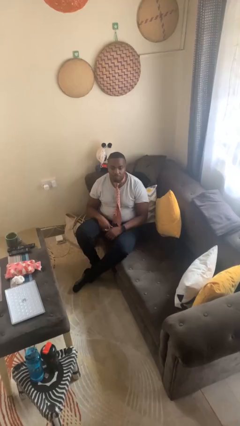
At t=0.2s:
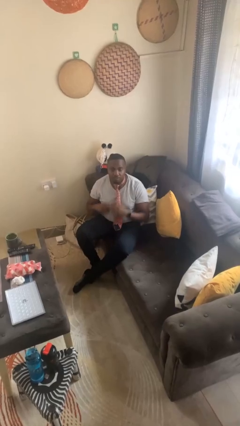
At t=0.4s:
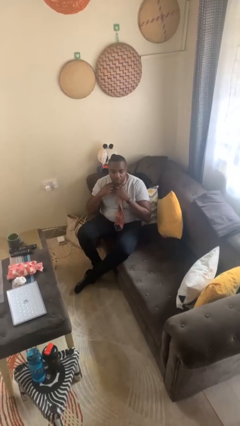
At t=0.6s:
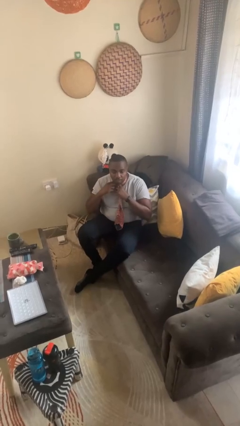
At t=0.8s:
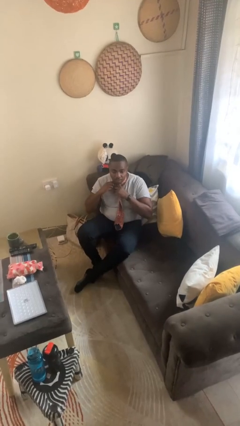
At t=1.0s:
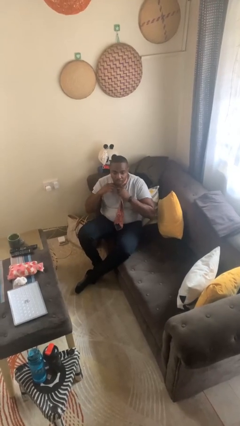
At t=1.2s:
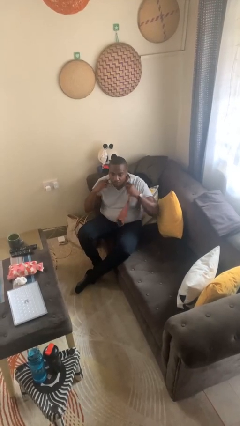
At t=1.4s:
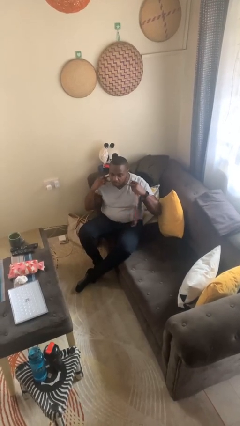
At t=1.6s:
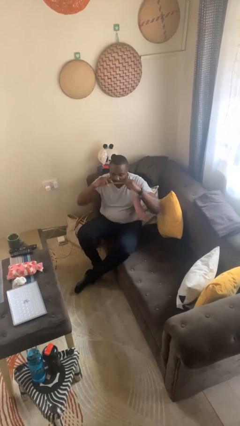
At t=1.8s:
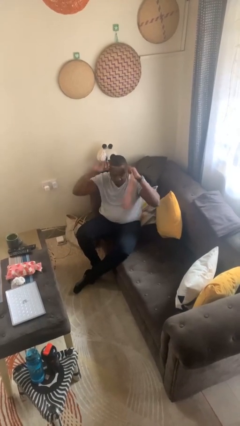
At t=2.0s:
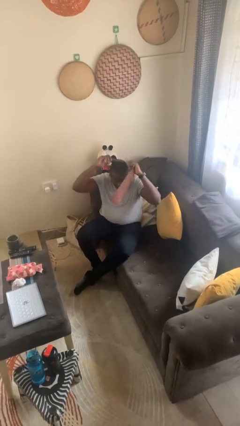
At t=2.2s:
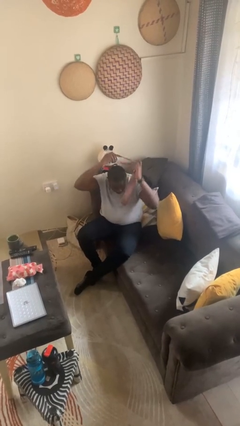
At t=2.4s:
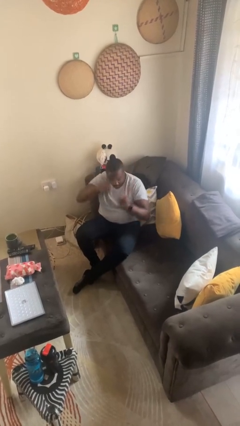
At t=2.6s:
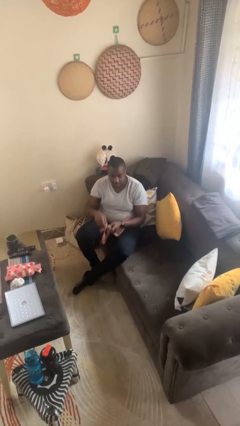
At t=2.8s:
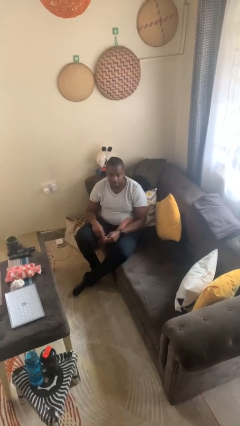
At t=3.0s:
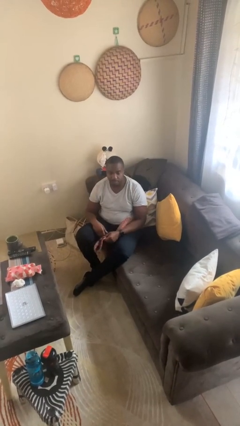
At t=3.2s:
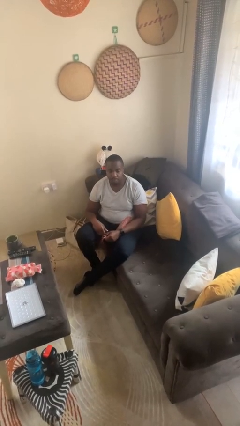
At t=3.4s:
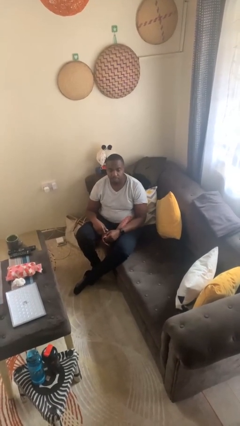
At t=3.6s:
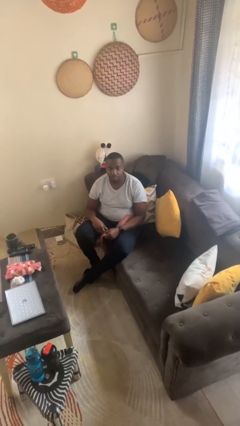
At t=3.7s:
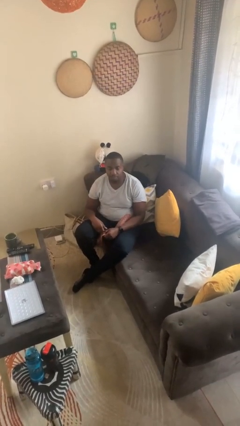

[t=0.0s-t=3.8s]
person takes off necktie

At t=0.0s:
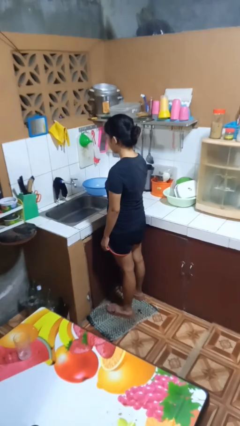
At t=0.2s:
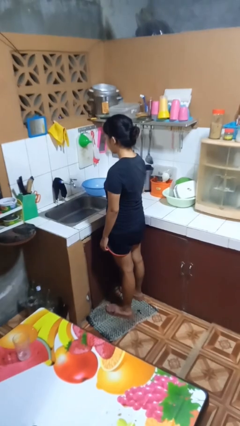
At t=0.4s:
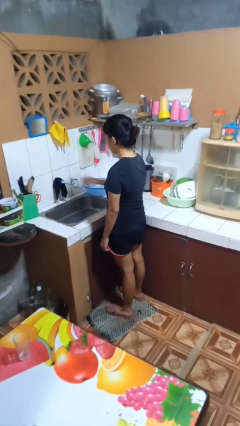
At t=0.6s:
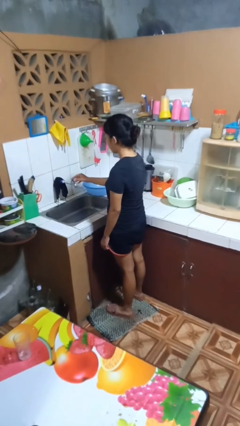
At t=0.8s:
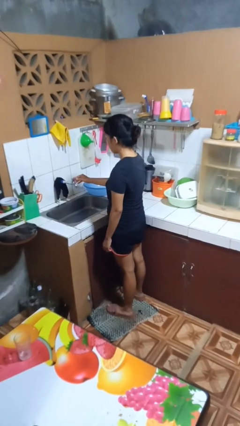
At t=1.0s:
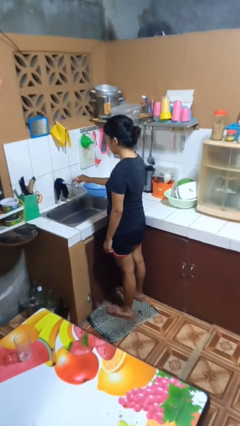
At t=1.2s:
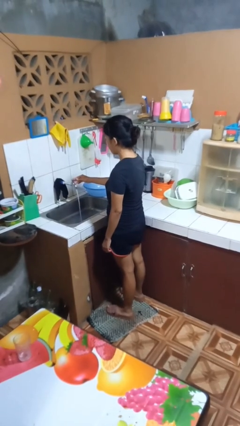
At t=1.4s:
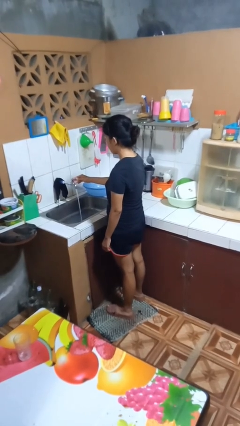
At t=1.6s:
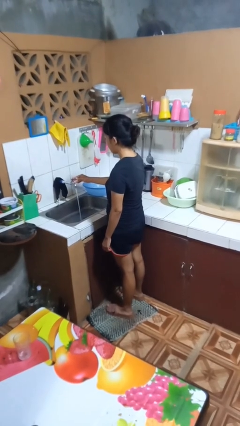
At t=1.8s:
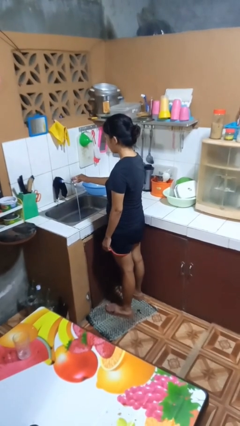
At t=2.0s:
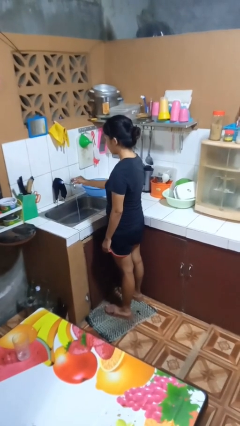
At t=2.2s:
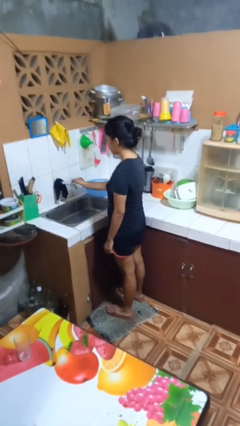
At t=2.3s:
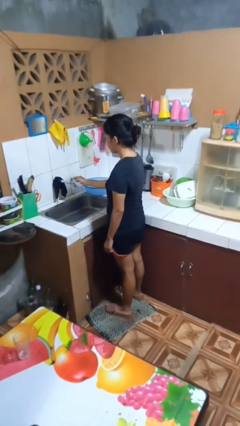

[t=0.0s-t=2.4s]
person turns on faucet

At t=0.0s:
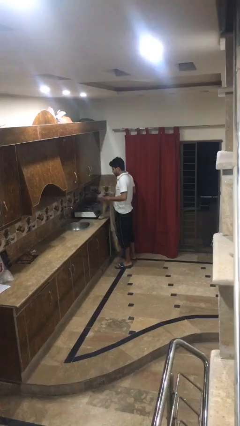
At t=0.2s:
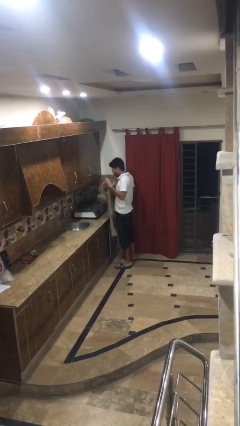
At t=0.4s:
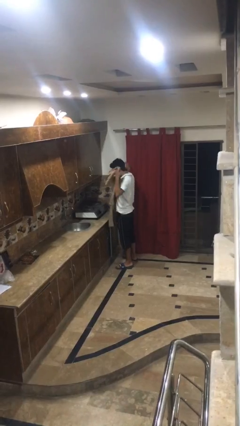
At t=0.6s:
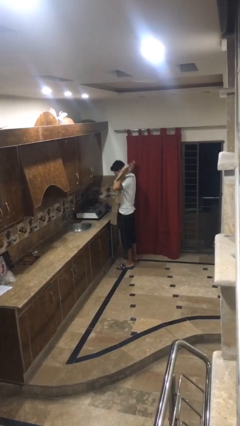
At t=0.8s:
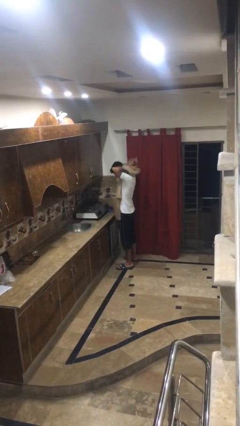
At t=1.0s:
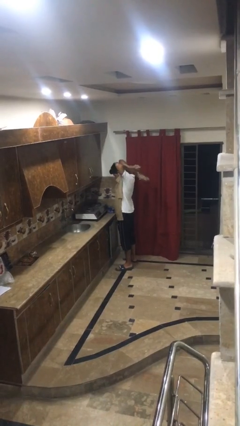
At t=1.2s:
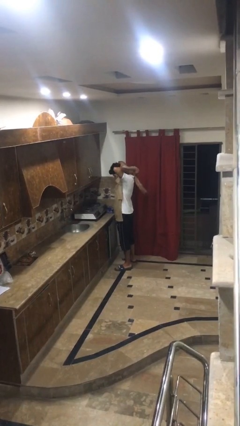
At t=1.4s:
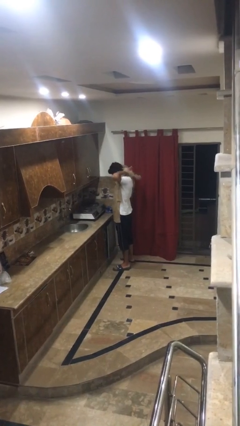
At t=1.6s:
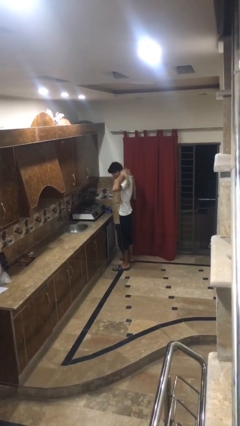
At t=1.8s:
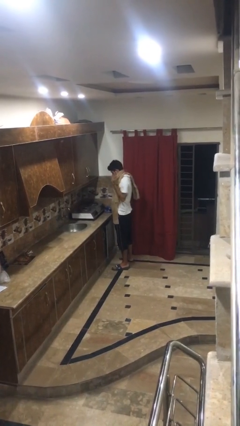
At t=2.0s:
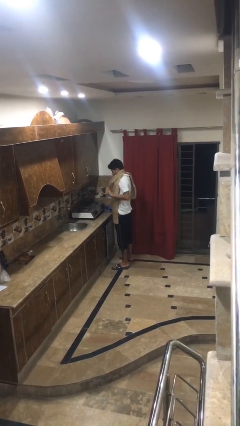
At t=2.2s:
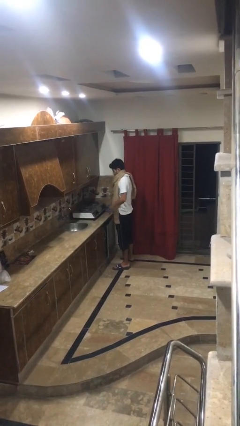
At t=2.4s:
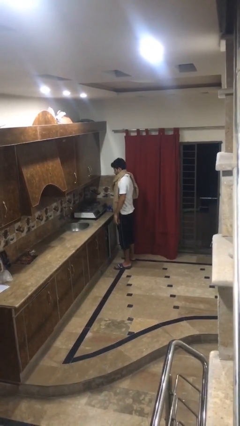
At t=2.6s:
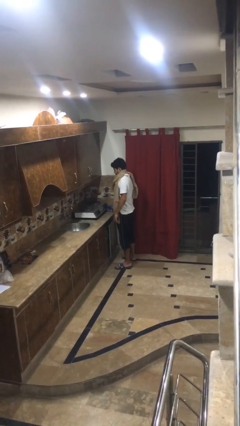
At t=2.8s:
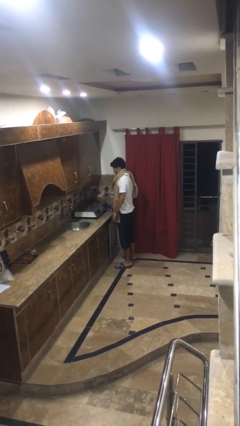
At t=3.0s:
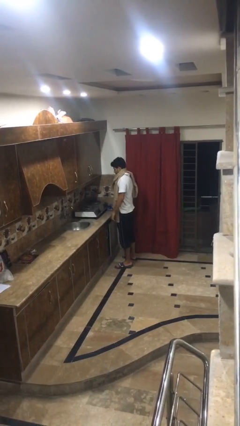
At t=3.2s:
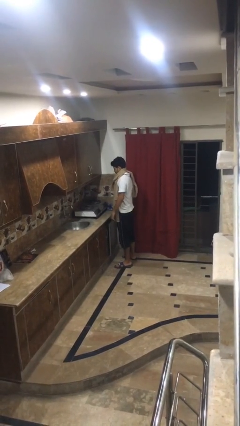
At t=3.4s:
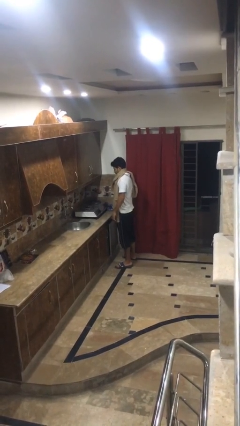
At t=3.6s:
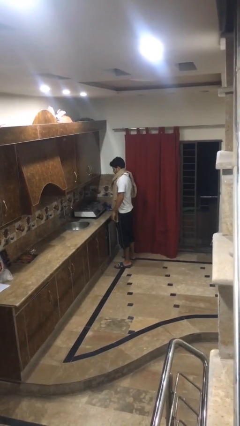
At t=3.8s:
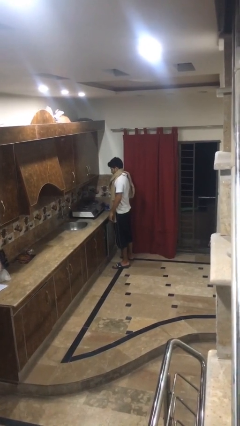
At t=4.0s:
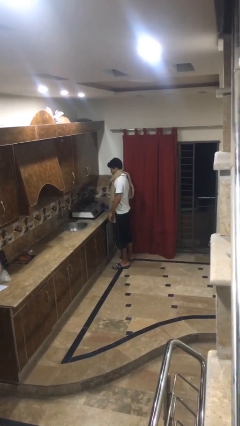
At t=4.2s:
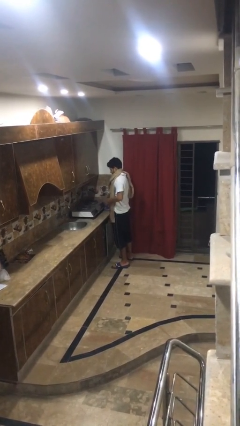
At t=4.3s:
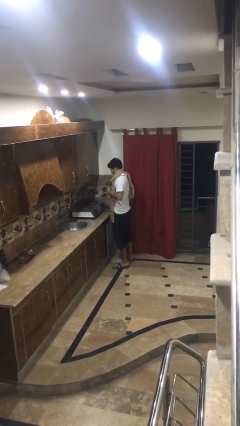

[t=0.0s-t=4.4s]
person puts on apron

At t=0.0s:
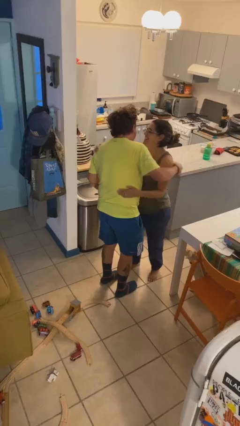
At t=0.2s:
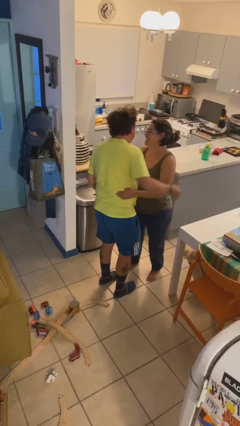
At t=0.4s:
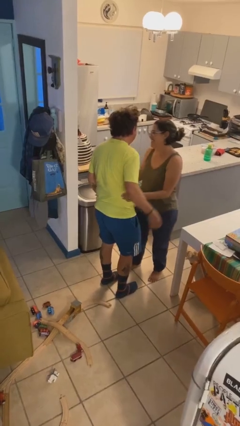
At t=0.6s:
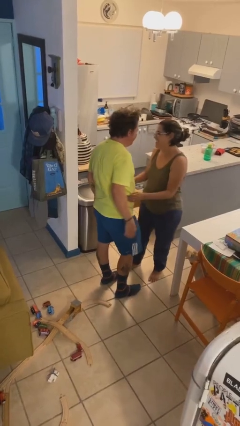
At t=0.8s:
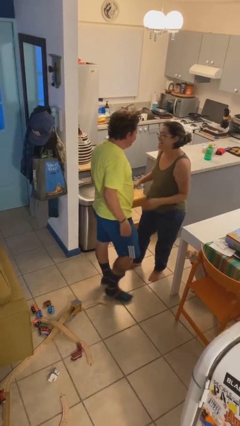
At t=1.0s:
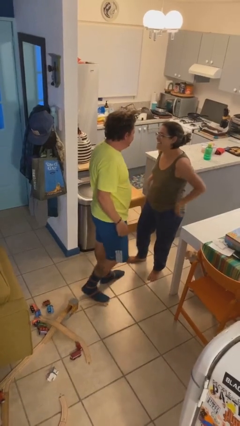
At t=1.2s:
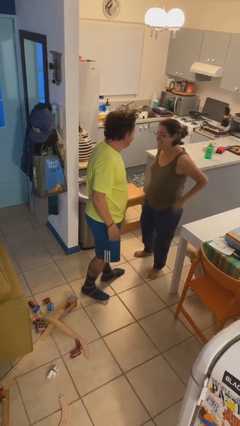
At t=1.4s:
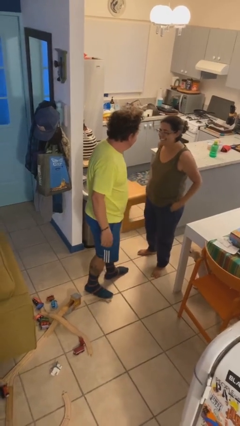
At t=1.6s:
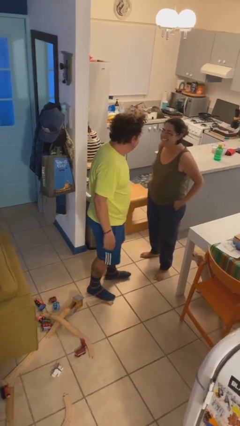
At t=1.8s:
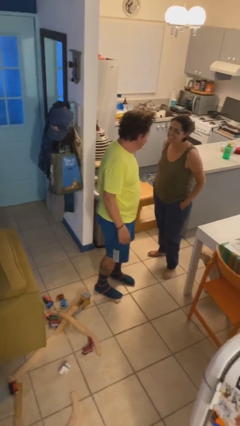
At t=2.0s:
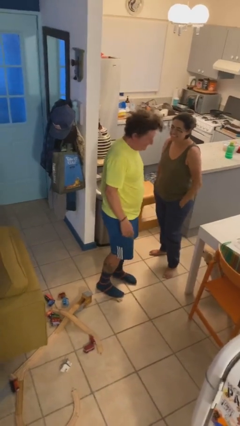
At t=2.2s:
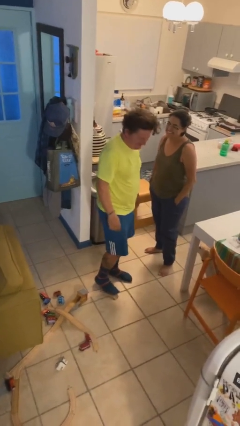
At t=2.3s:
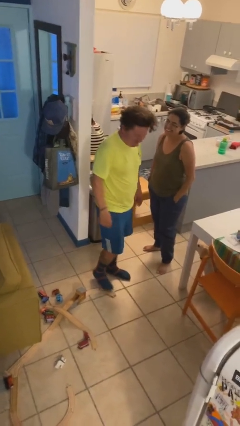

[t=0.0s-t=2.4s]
person talks to person

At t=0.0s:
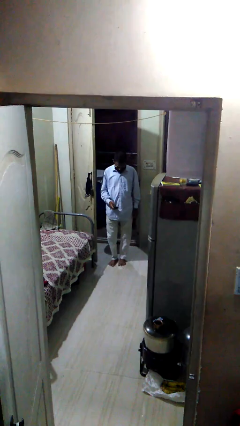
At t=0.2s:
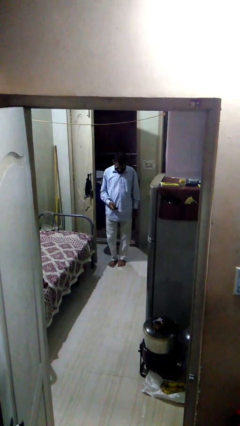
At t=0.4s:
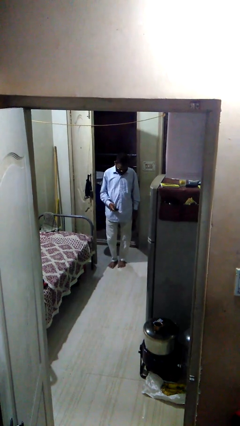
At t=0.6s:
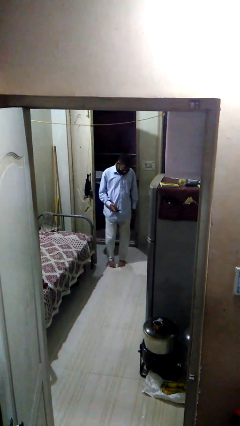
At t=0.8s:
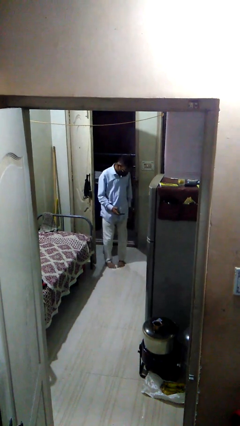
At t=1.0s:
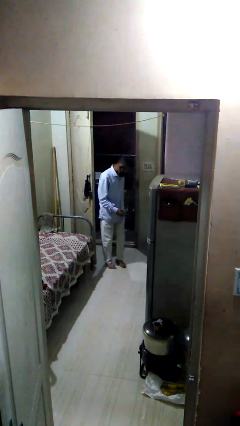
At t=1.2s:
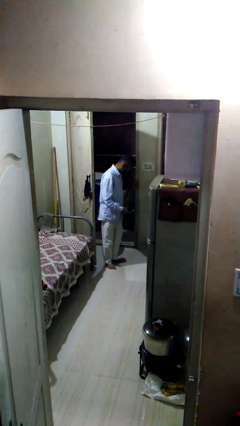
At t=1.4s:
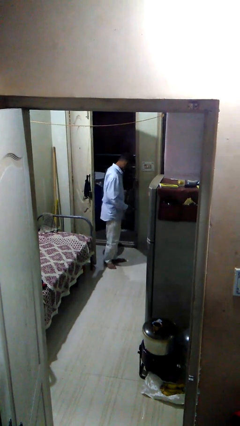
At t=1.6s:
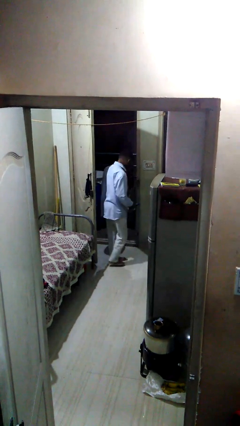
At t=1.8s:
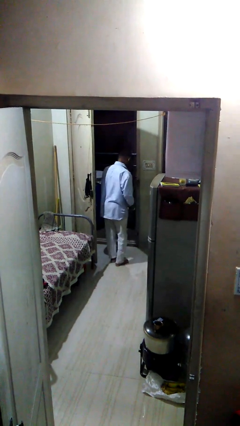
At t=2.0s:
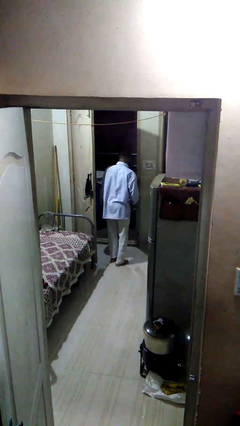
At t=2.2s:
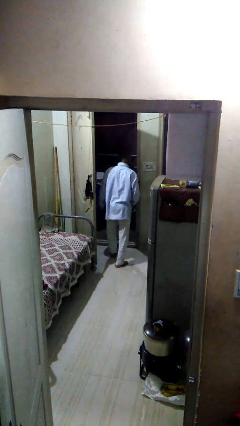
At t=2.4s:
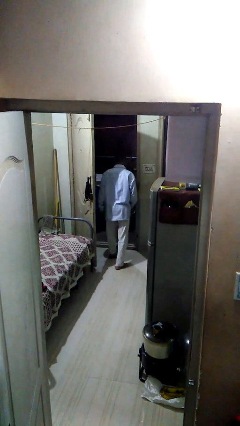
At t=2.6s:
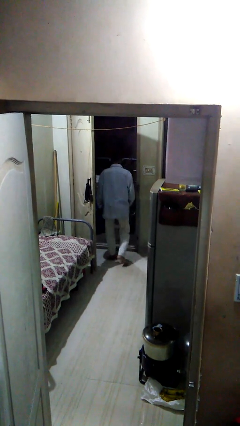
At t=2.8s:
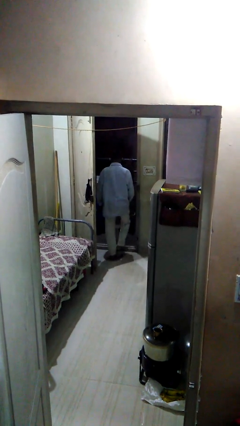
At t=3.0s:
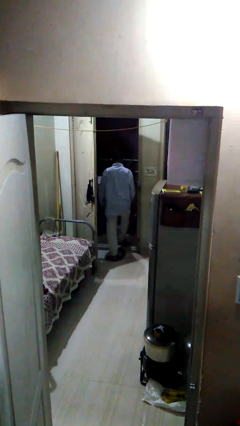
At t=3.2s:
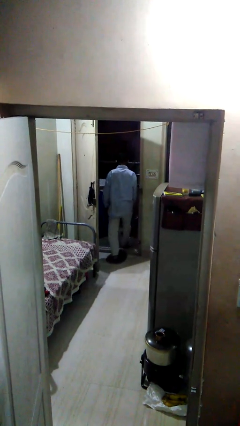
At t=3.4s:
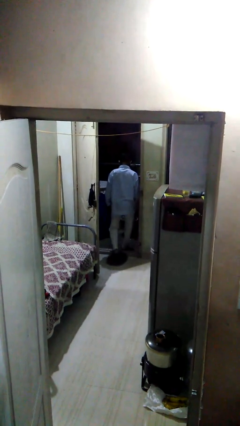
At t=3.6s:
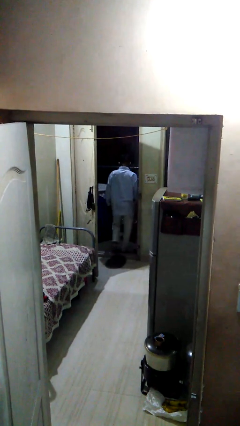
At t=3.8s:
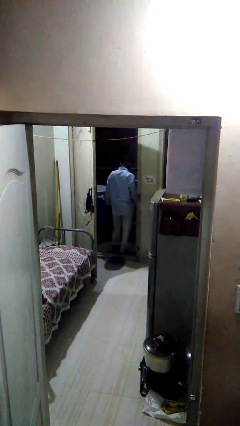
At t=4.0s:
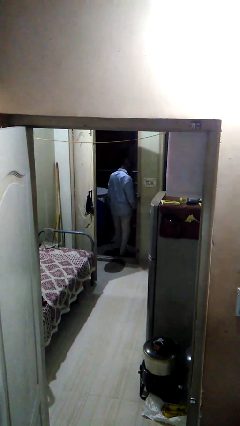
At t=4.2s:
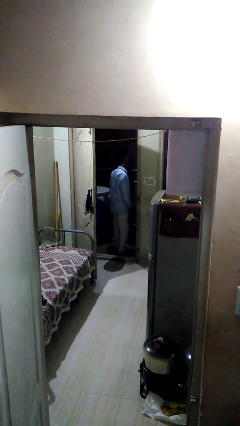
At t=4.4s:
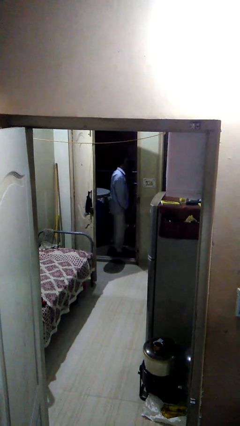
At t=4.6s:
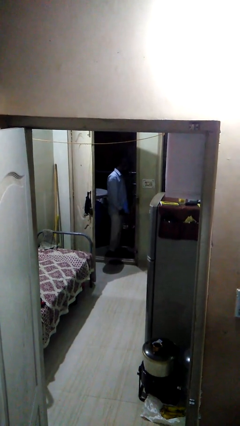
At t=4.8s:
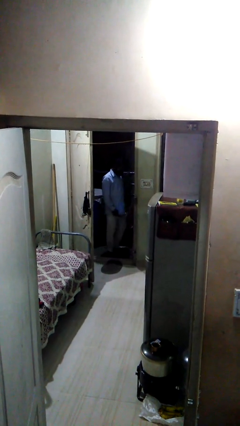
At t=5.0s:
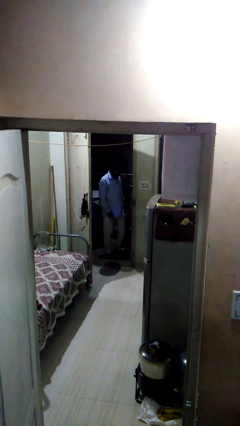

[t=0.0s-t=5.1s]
person exits scene through structure
